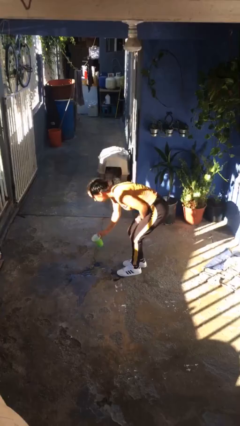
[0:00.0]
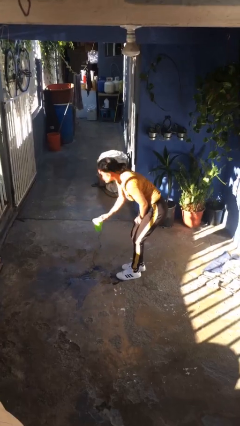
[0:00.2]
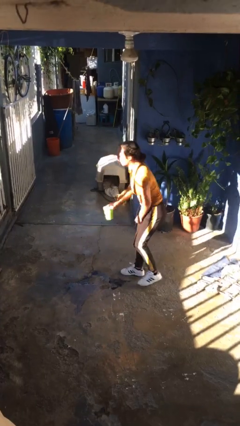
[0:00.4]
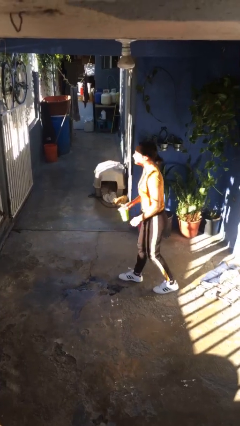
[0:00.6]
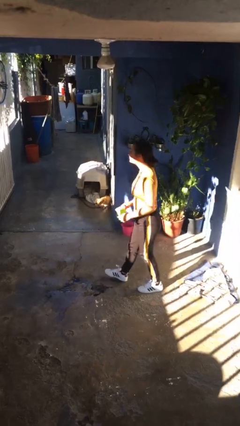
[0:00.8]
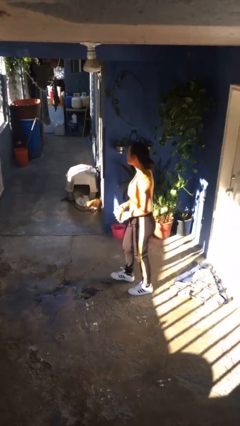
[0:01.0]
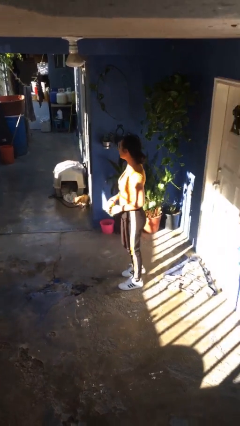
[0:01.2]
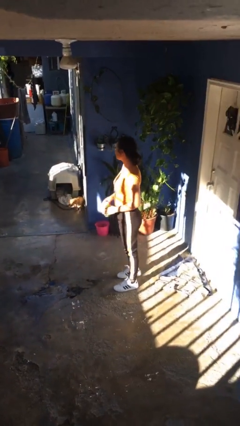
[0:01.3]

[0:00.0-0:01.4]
person sets upright glass

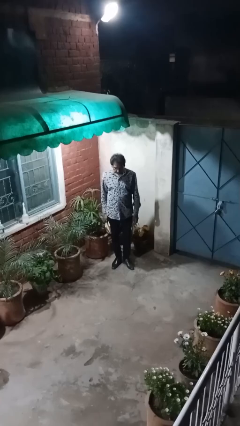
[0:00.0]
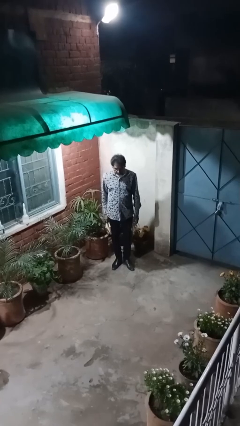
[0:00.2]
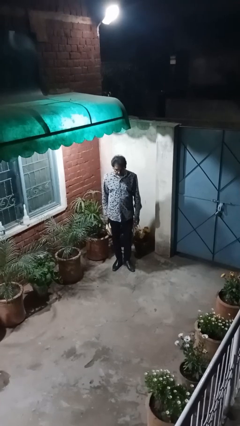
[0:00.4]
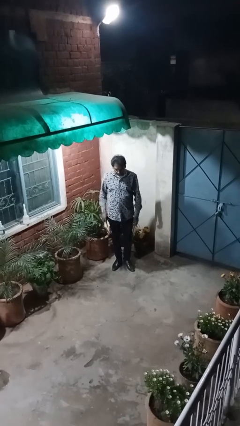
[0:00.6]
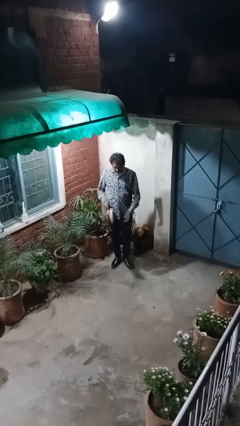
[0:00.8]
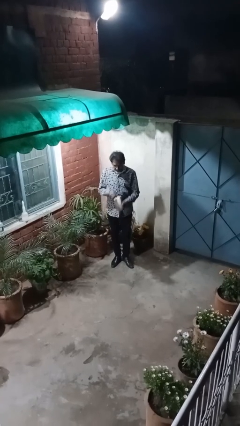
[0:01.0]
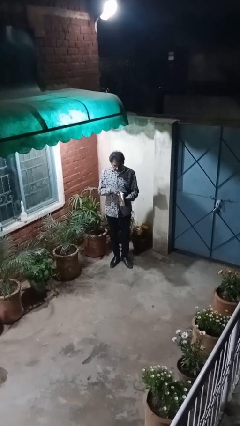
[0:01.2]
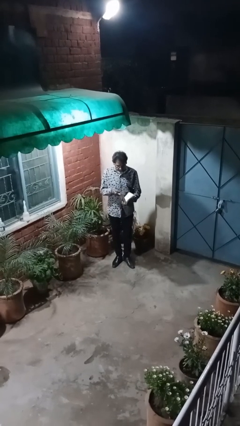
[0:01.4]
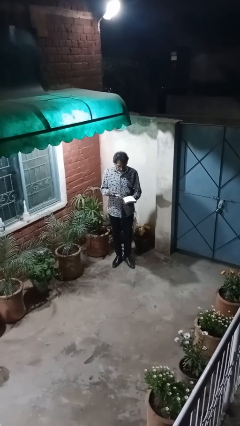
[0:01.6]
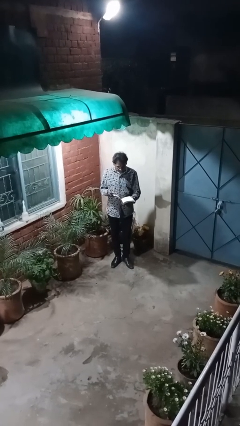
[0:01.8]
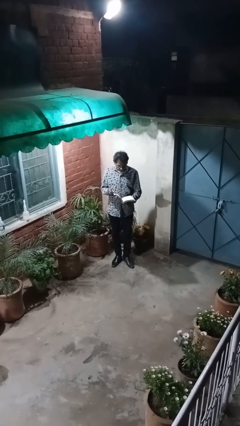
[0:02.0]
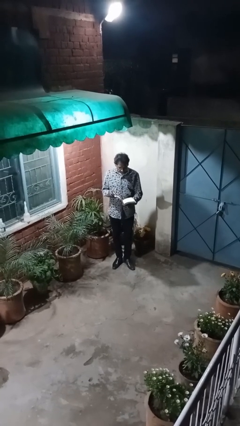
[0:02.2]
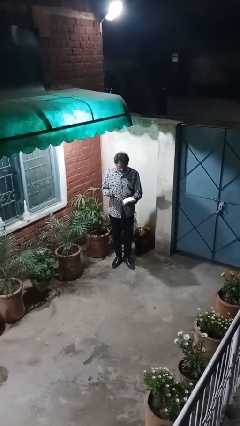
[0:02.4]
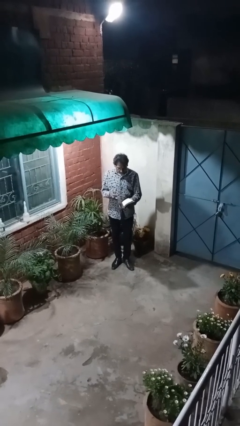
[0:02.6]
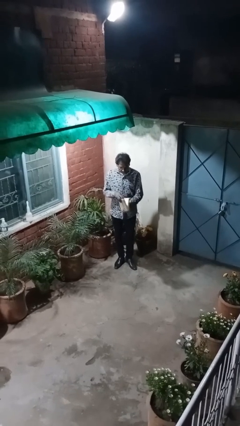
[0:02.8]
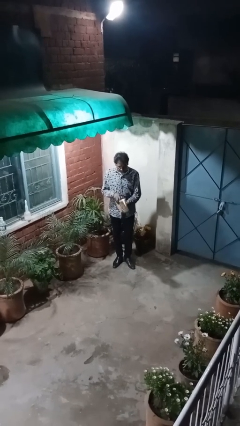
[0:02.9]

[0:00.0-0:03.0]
person reads document

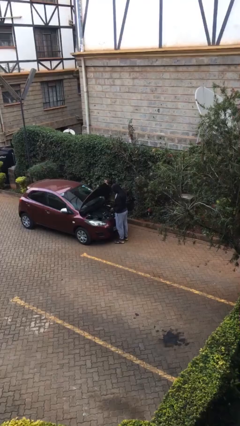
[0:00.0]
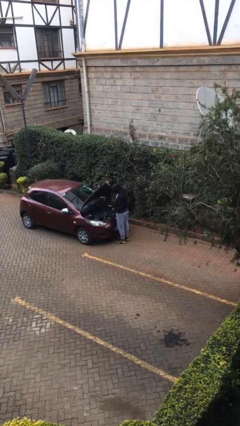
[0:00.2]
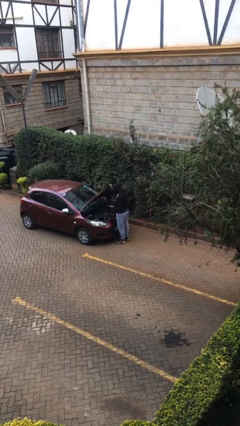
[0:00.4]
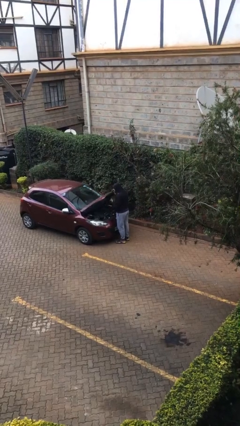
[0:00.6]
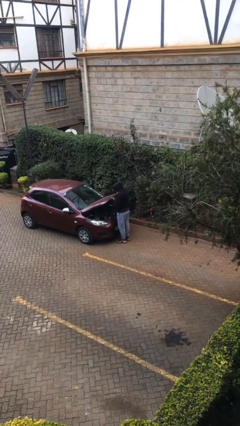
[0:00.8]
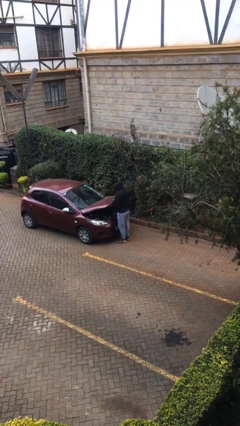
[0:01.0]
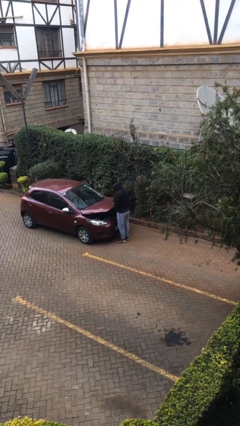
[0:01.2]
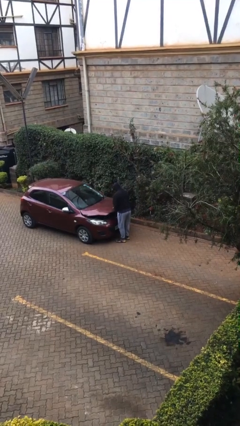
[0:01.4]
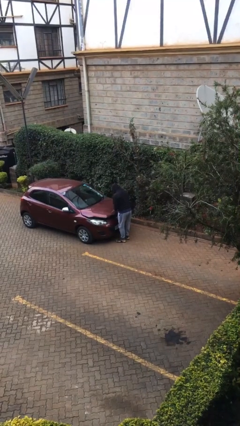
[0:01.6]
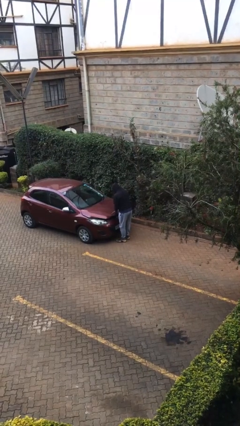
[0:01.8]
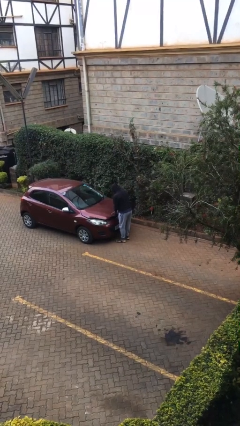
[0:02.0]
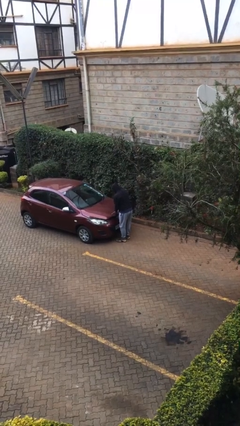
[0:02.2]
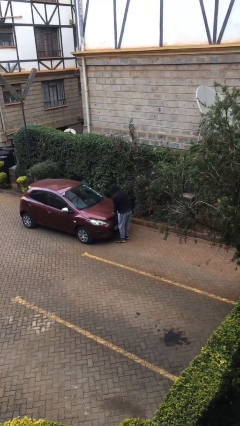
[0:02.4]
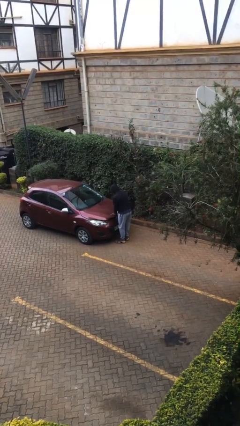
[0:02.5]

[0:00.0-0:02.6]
person closes car hood

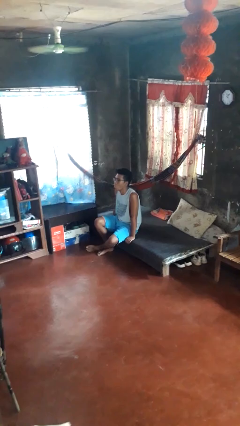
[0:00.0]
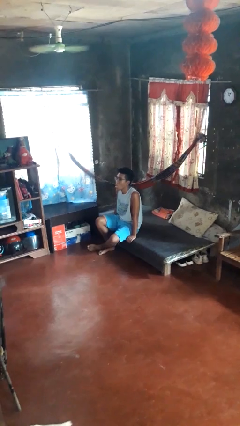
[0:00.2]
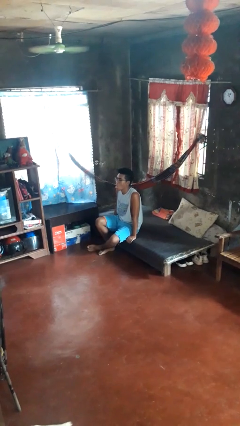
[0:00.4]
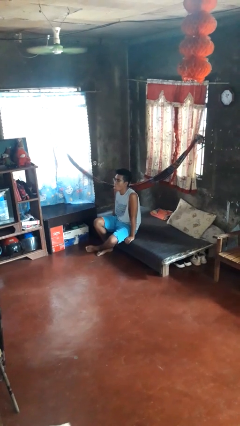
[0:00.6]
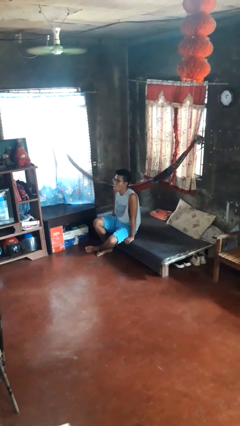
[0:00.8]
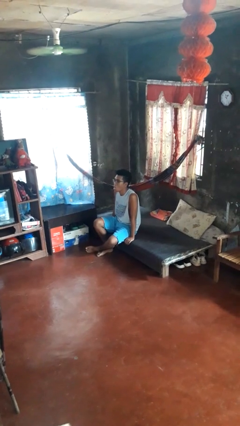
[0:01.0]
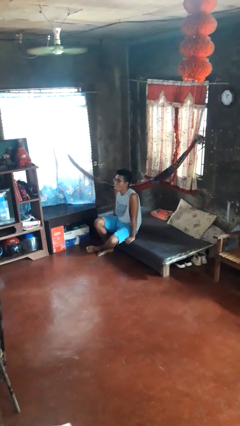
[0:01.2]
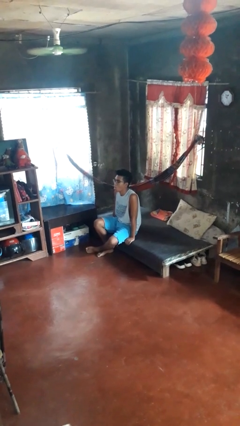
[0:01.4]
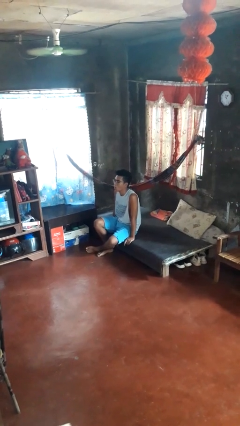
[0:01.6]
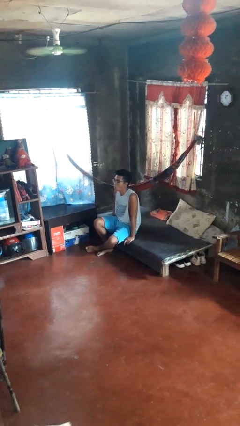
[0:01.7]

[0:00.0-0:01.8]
person sticks out tongue

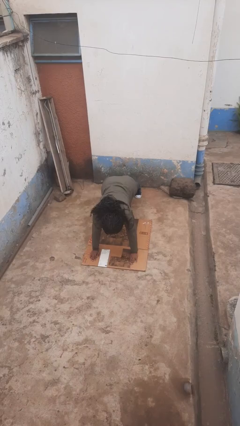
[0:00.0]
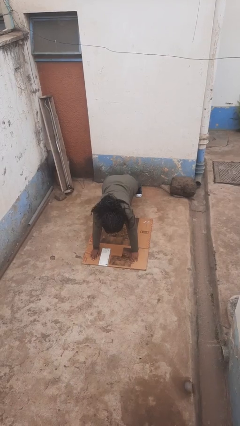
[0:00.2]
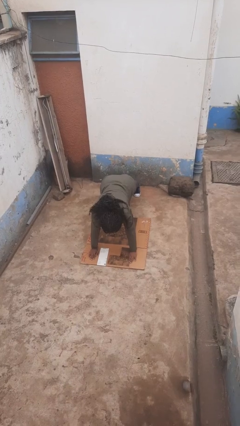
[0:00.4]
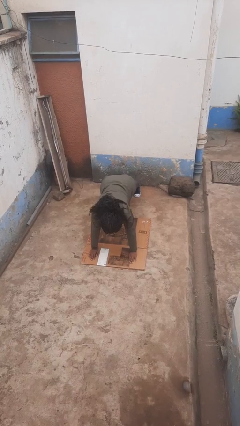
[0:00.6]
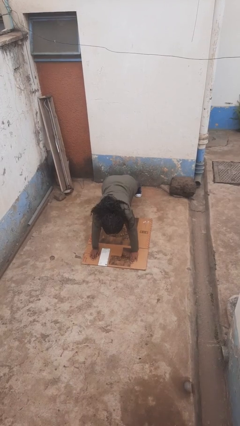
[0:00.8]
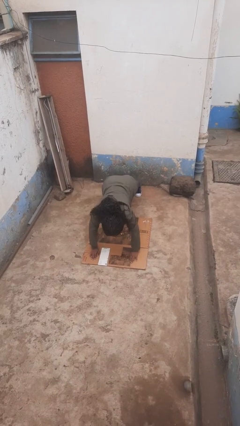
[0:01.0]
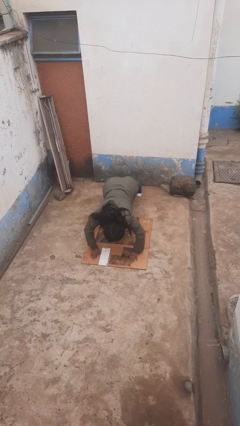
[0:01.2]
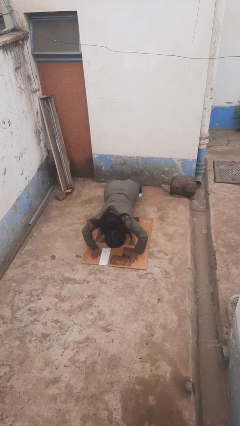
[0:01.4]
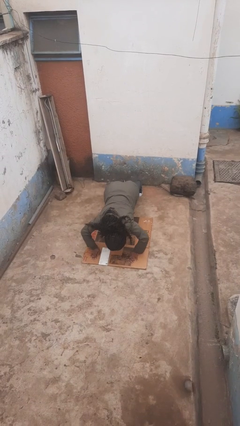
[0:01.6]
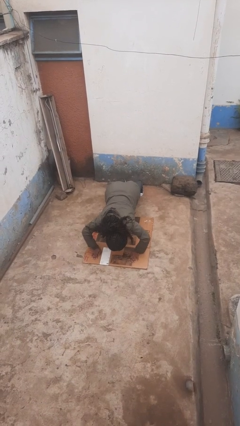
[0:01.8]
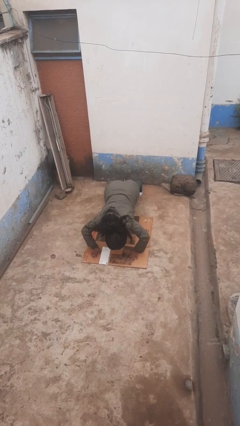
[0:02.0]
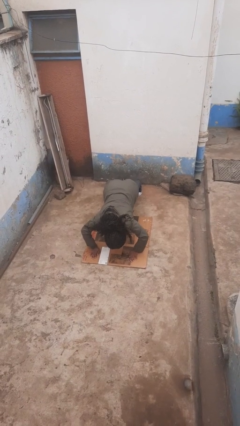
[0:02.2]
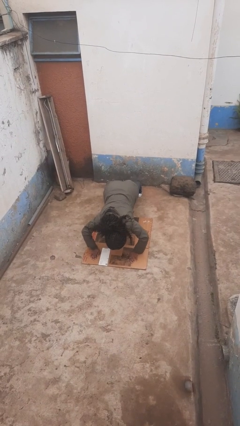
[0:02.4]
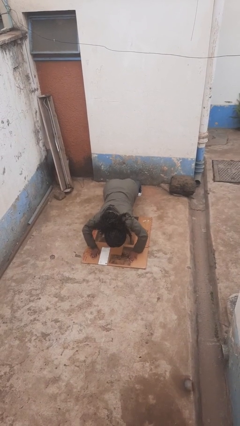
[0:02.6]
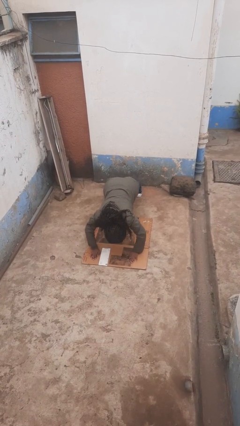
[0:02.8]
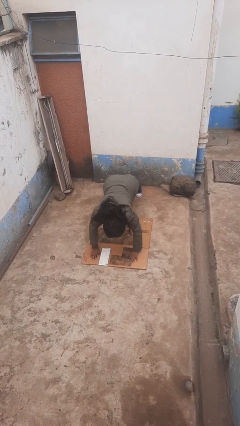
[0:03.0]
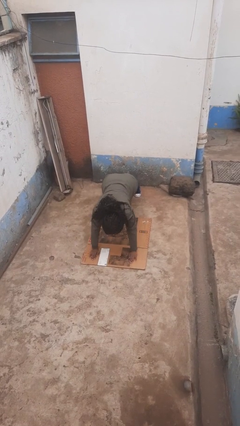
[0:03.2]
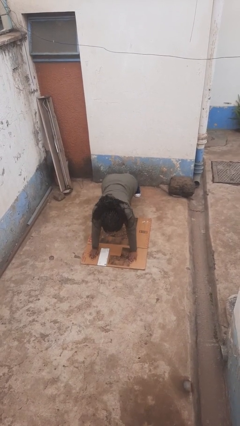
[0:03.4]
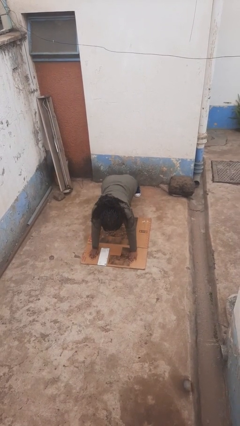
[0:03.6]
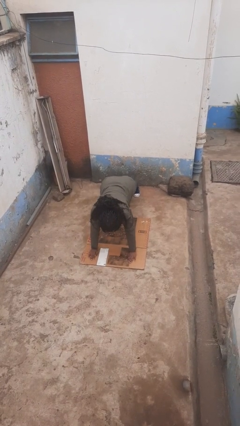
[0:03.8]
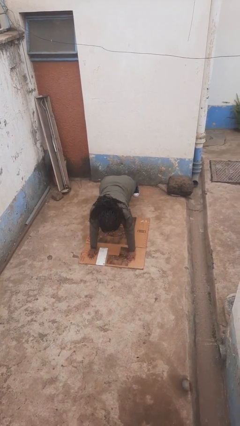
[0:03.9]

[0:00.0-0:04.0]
person exercises with pushup

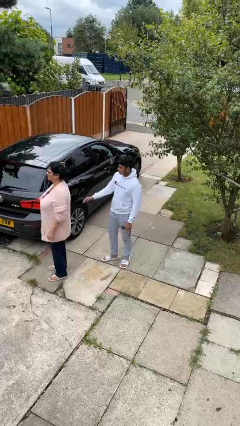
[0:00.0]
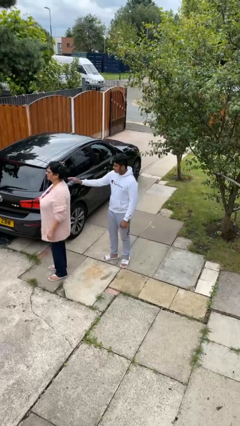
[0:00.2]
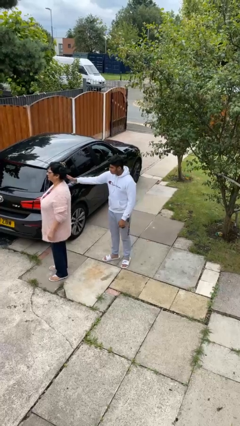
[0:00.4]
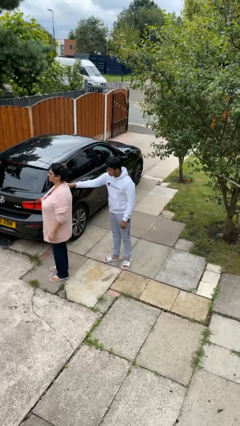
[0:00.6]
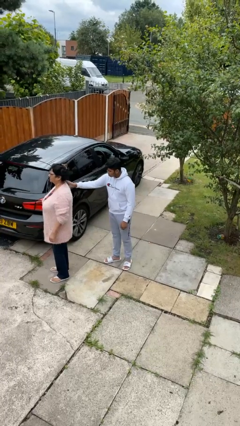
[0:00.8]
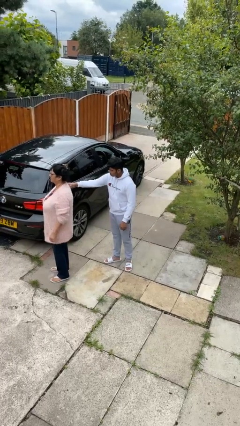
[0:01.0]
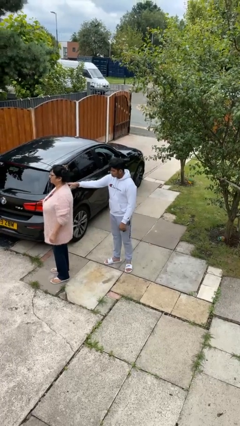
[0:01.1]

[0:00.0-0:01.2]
person touches back of person

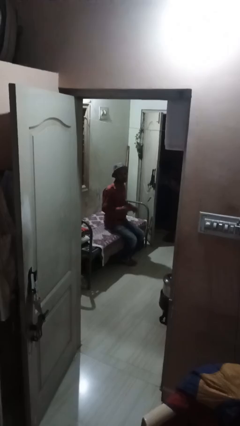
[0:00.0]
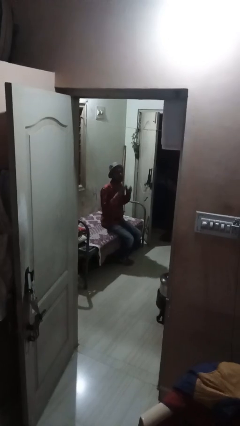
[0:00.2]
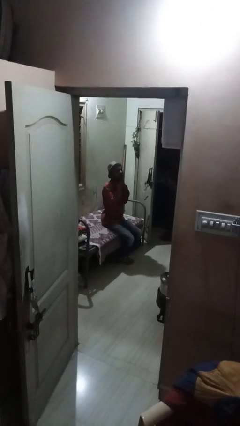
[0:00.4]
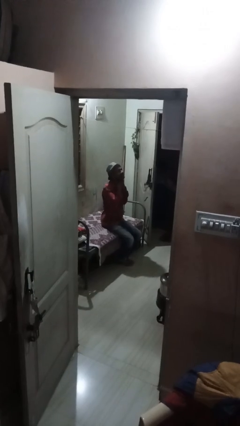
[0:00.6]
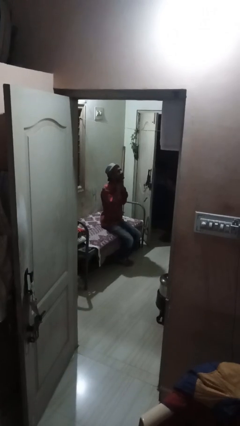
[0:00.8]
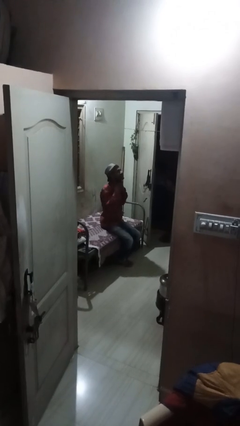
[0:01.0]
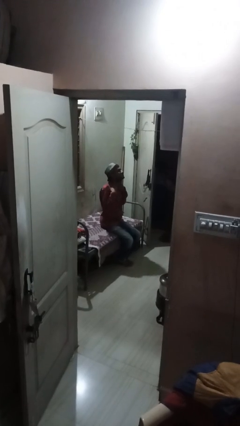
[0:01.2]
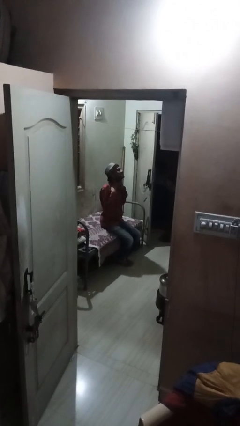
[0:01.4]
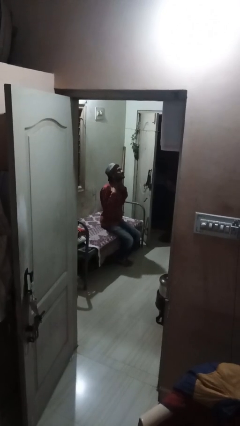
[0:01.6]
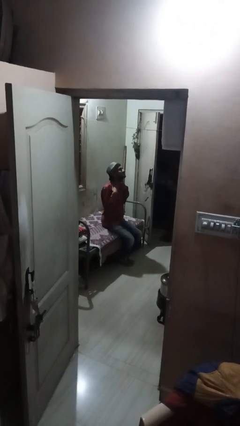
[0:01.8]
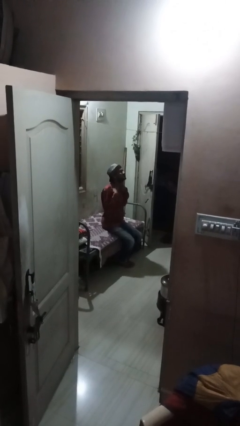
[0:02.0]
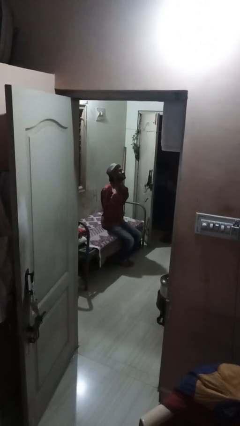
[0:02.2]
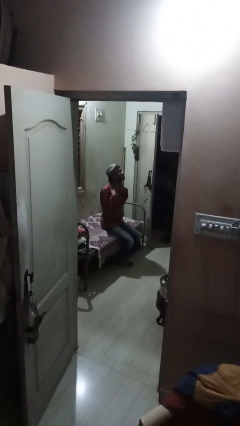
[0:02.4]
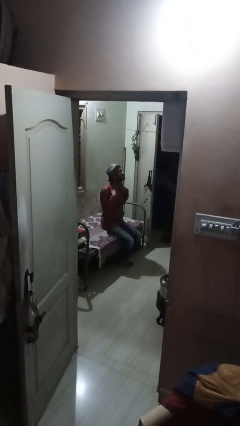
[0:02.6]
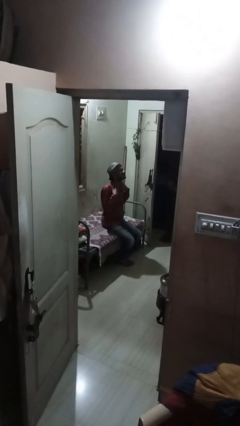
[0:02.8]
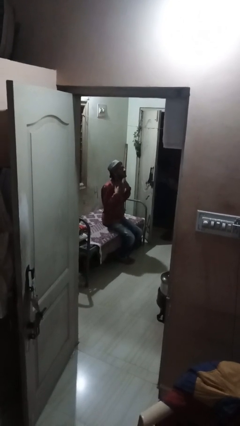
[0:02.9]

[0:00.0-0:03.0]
person rubs neck

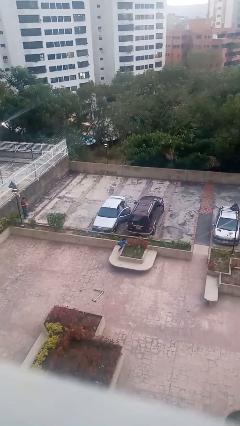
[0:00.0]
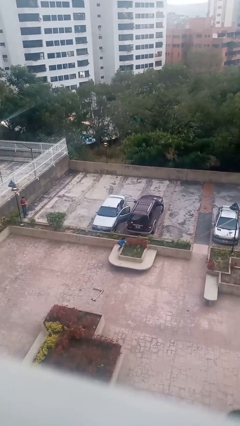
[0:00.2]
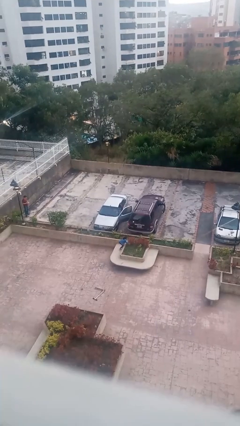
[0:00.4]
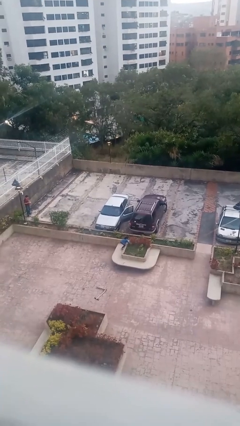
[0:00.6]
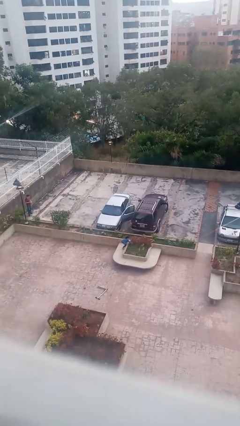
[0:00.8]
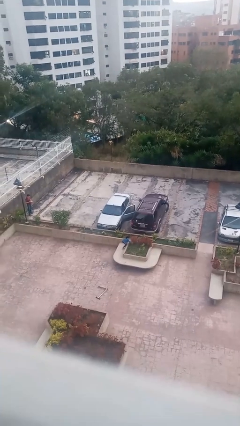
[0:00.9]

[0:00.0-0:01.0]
person enters car